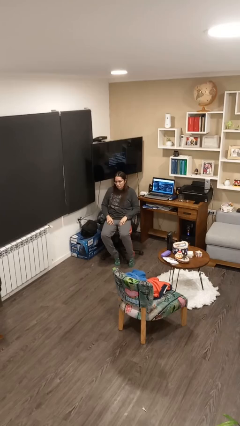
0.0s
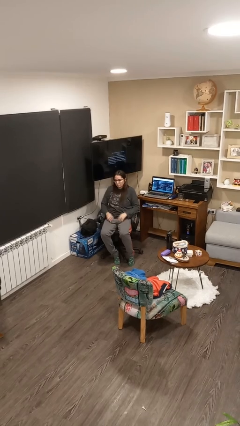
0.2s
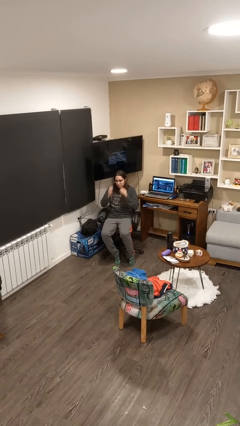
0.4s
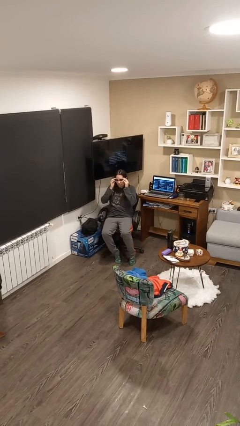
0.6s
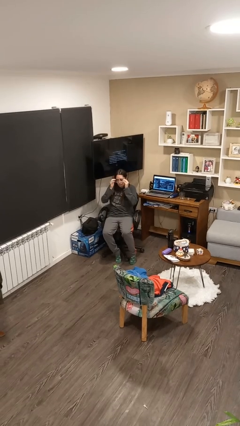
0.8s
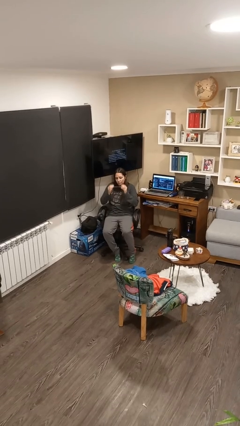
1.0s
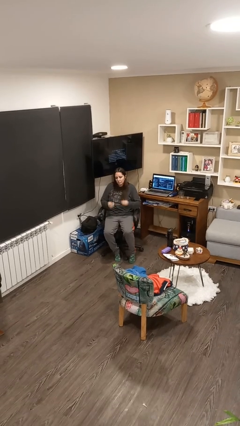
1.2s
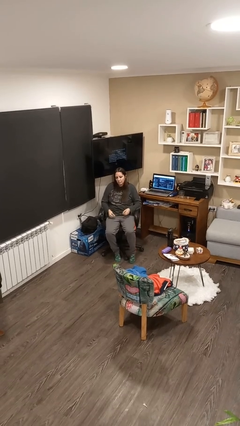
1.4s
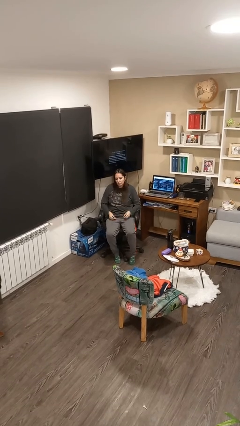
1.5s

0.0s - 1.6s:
person takes off glasses

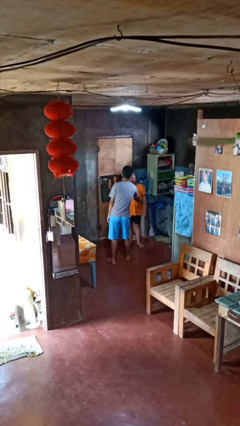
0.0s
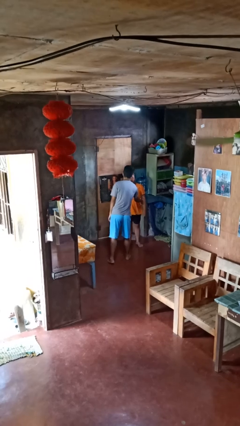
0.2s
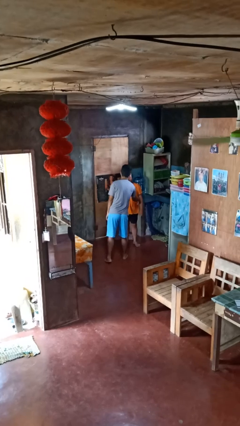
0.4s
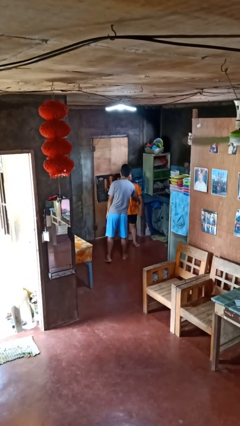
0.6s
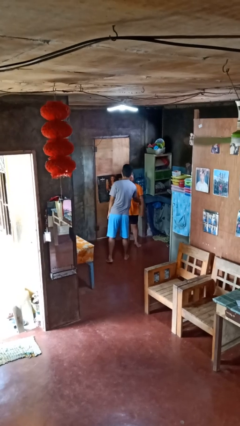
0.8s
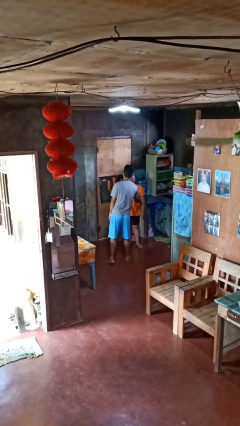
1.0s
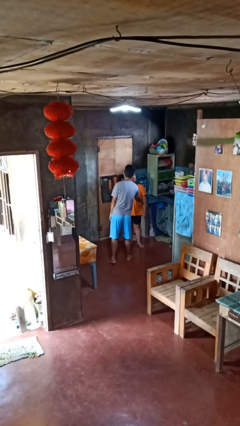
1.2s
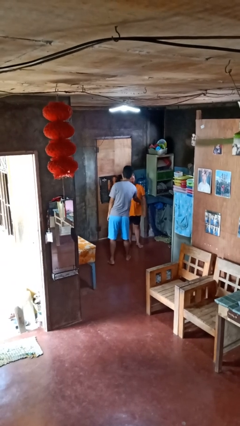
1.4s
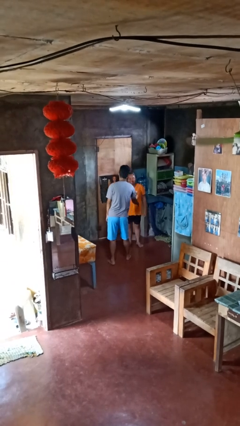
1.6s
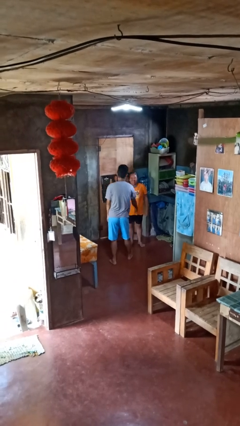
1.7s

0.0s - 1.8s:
person tickles person

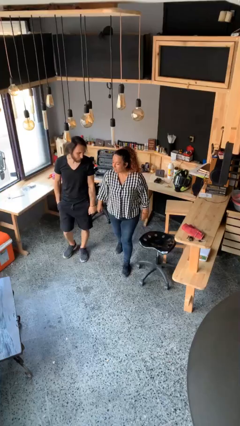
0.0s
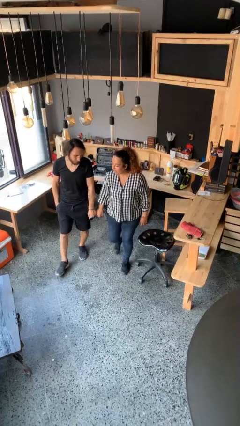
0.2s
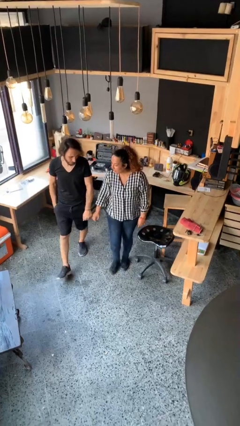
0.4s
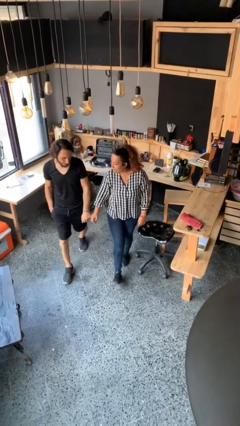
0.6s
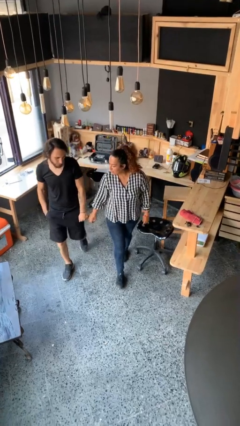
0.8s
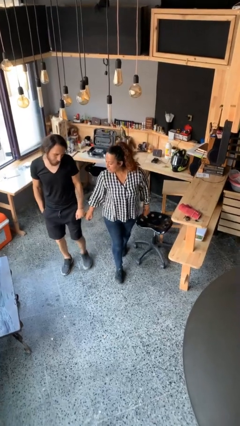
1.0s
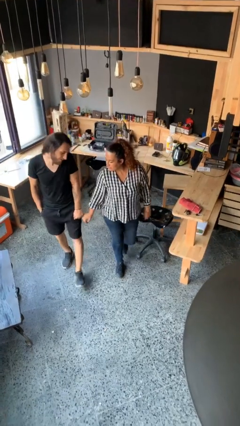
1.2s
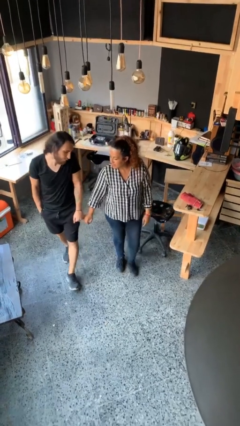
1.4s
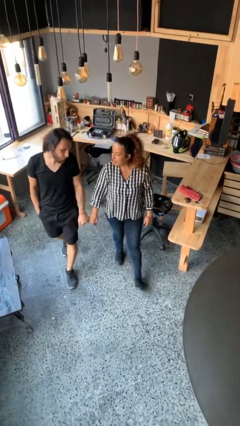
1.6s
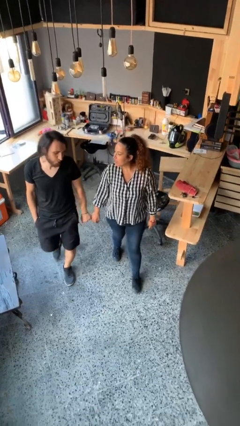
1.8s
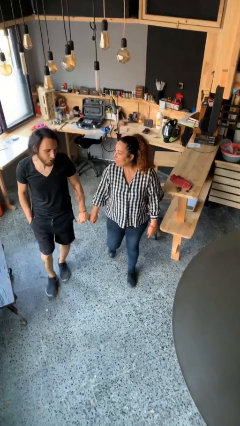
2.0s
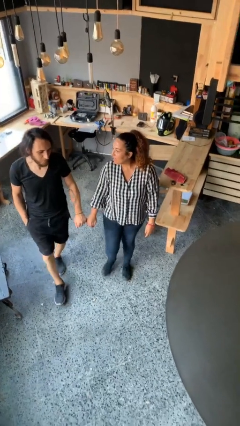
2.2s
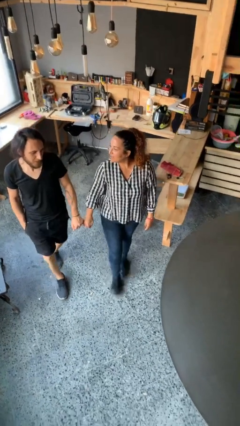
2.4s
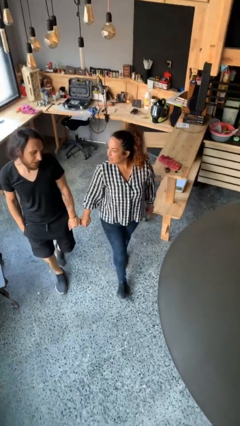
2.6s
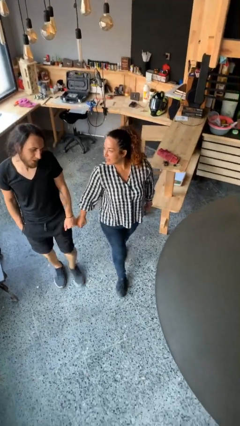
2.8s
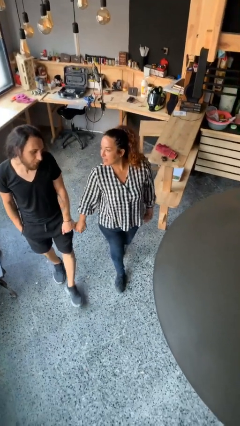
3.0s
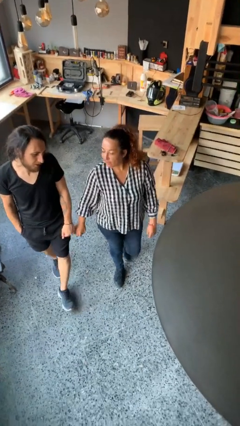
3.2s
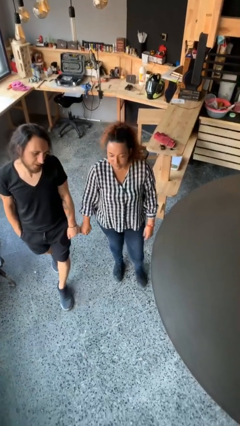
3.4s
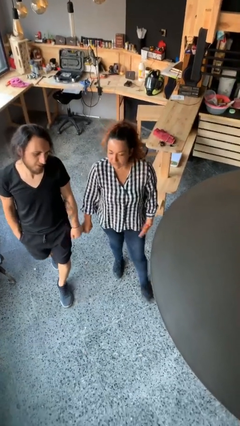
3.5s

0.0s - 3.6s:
person holds hand

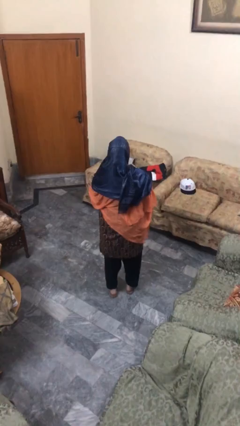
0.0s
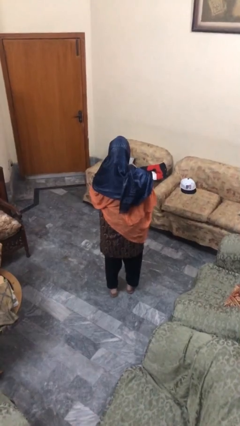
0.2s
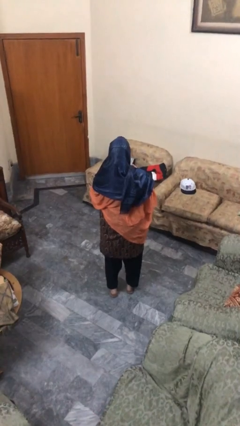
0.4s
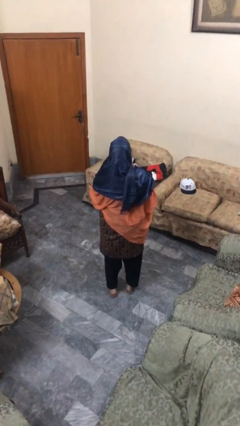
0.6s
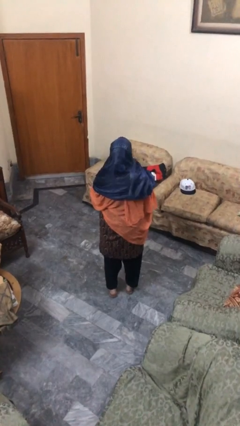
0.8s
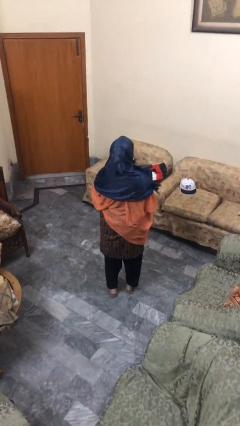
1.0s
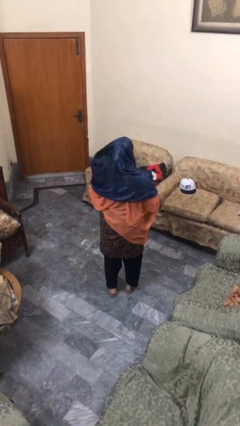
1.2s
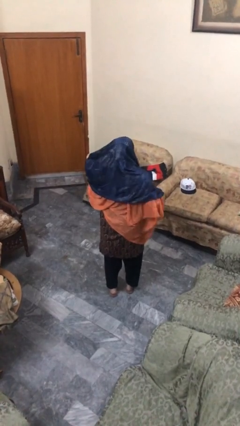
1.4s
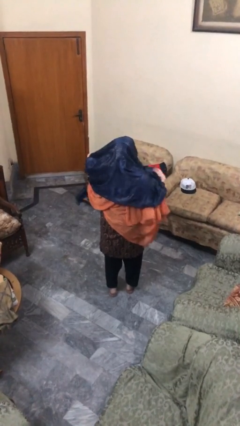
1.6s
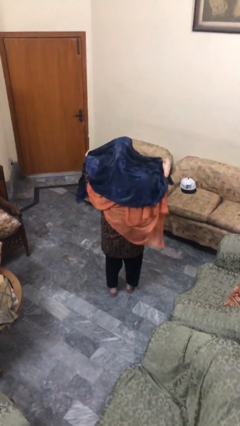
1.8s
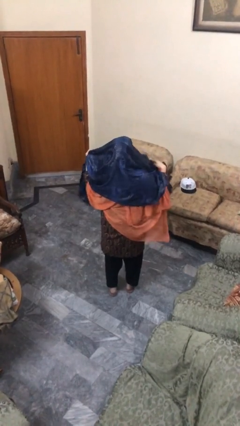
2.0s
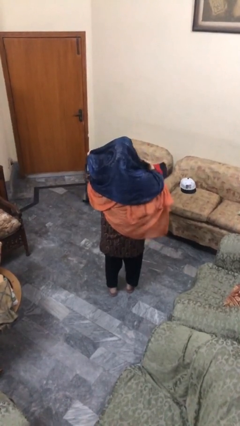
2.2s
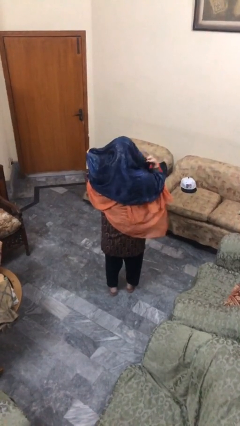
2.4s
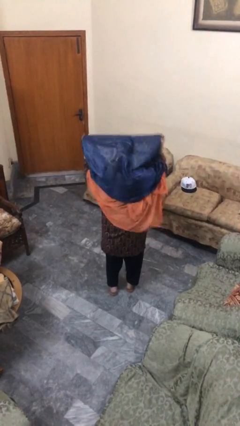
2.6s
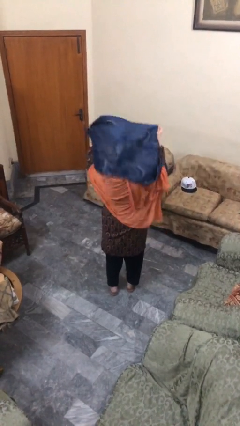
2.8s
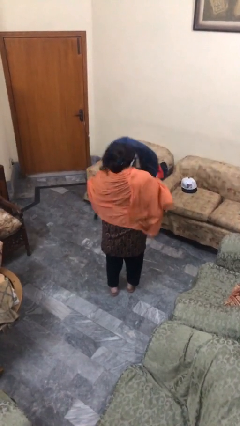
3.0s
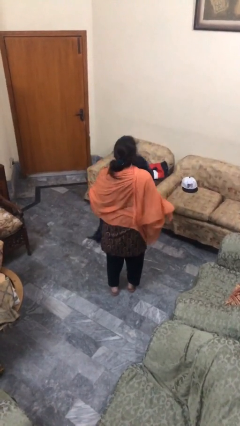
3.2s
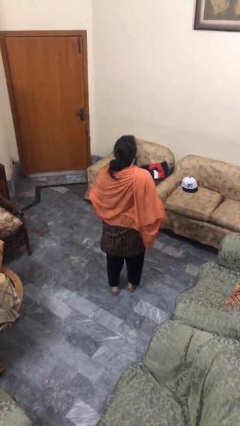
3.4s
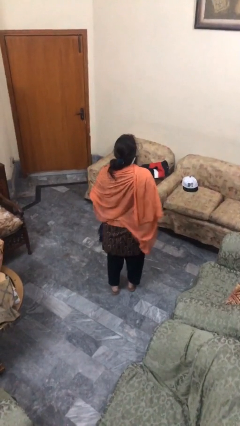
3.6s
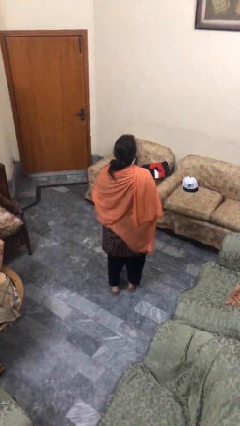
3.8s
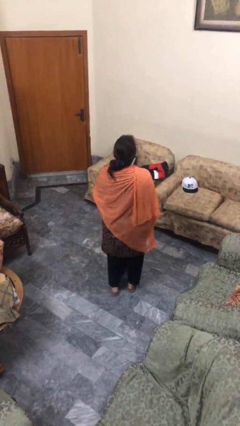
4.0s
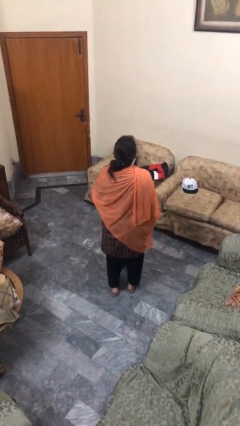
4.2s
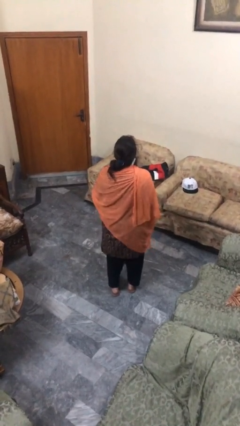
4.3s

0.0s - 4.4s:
person takes off scarf

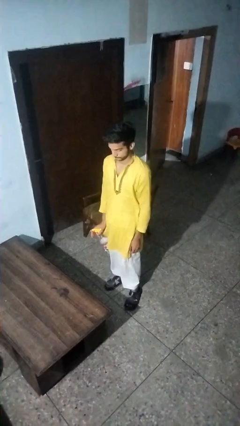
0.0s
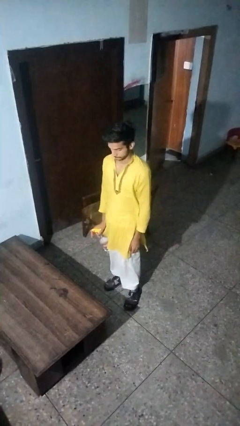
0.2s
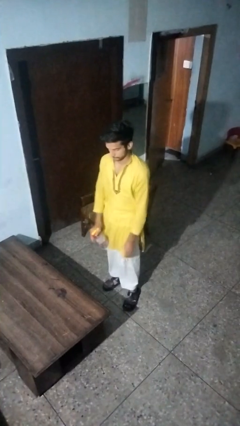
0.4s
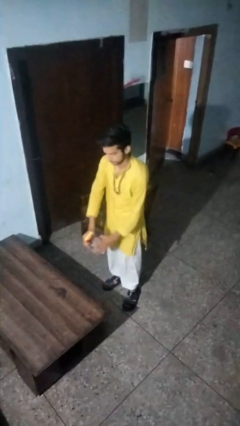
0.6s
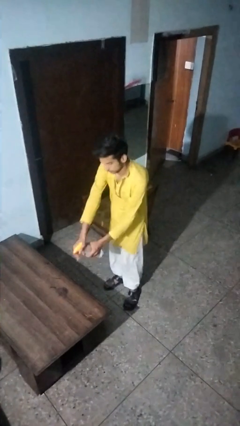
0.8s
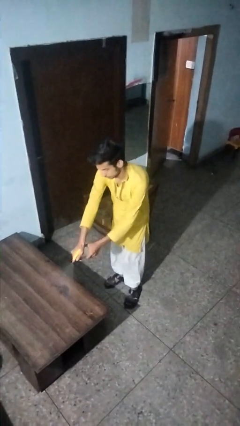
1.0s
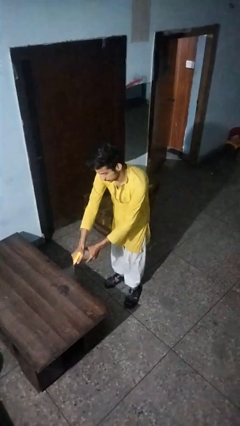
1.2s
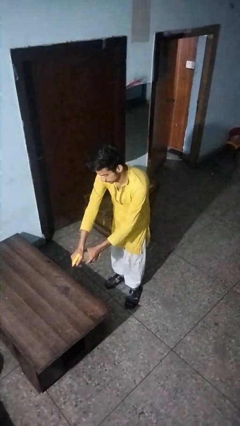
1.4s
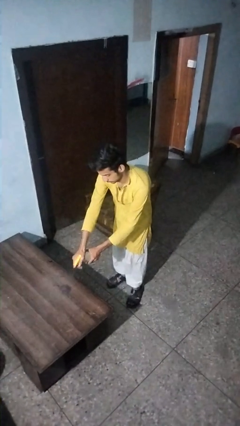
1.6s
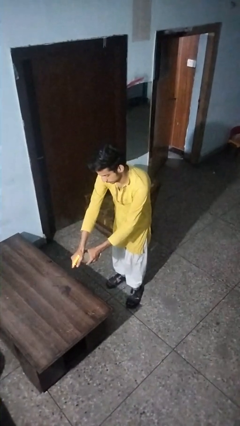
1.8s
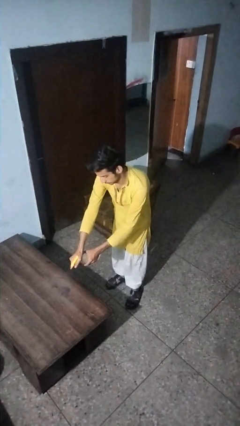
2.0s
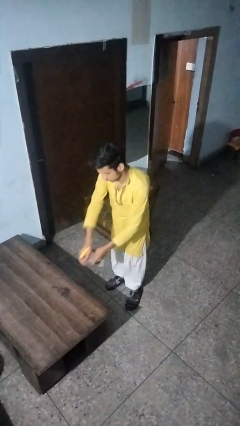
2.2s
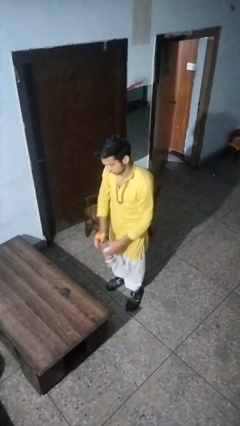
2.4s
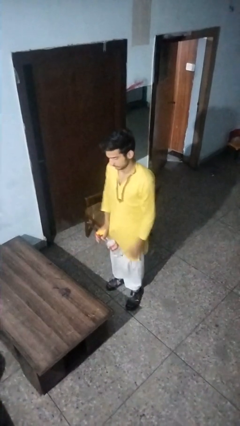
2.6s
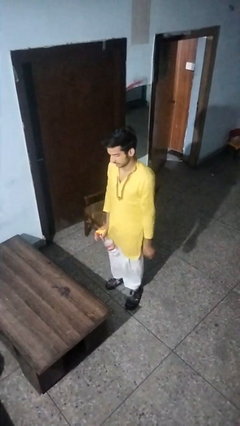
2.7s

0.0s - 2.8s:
person sprays from bottle

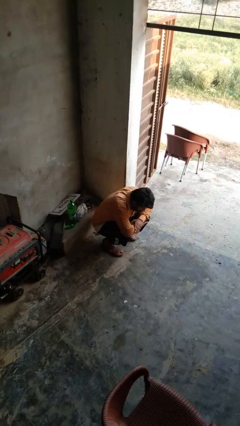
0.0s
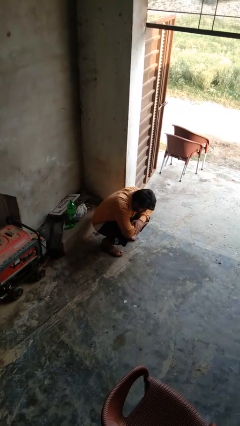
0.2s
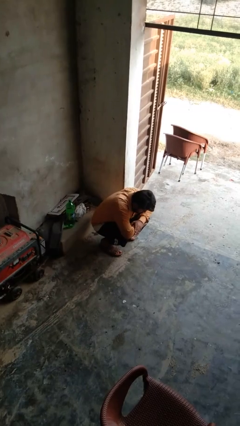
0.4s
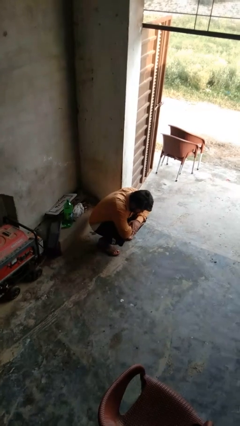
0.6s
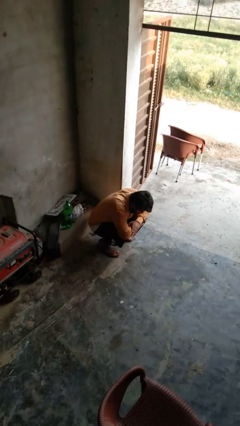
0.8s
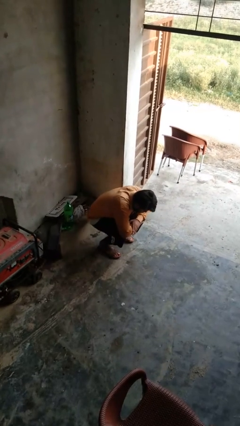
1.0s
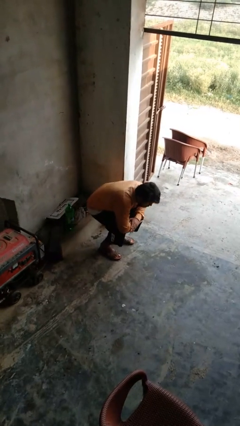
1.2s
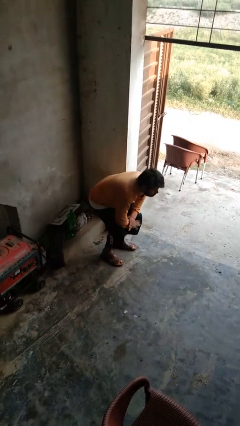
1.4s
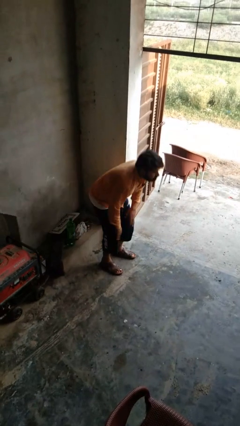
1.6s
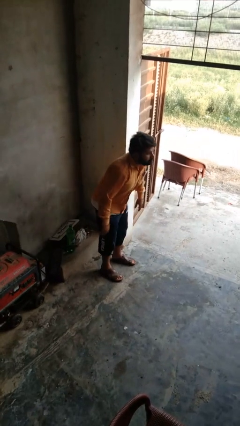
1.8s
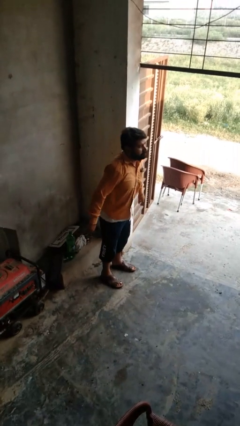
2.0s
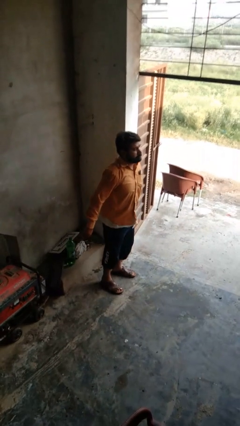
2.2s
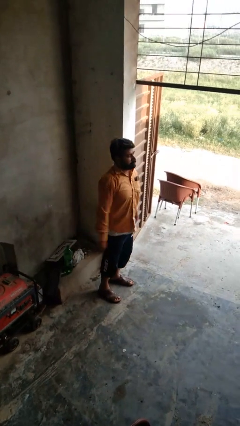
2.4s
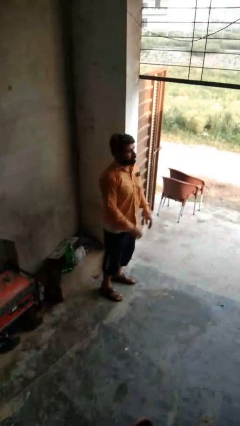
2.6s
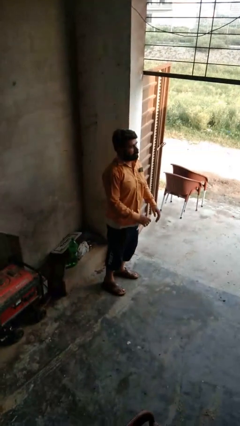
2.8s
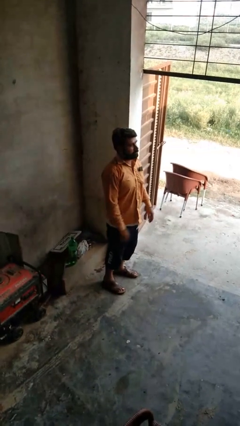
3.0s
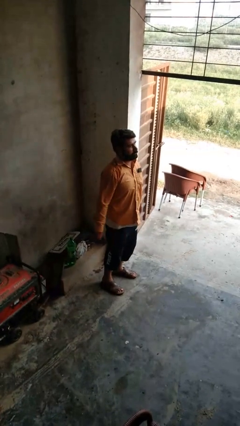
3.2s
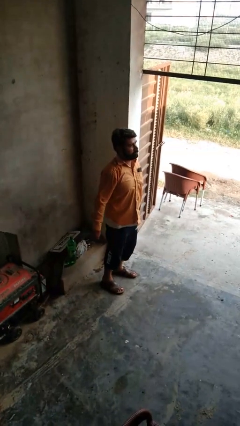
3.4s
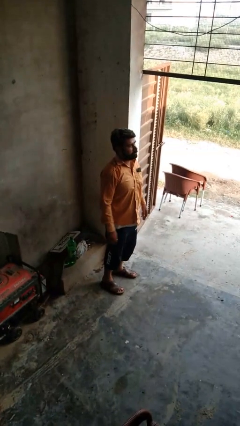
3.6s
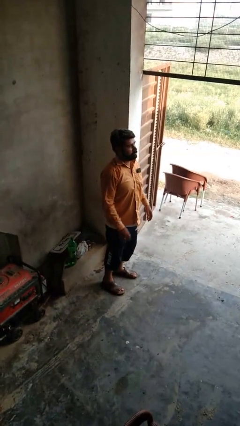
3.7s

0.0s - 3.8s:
person stands up
